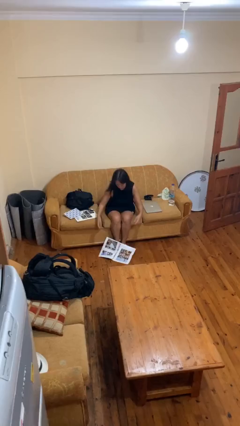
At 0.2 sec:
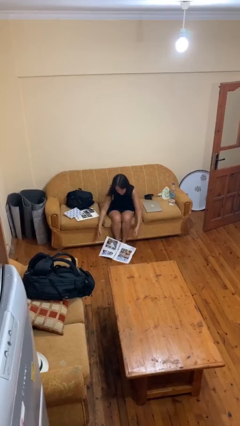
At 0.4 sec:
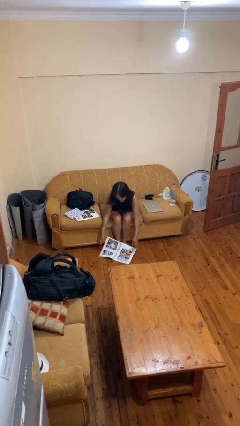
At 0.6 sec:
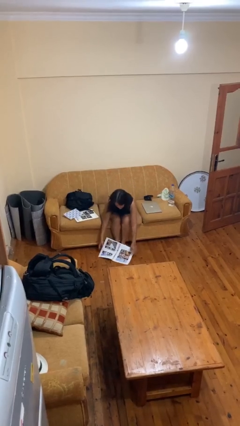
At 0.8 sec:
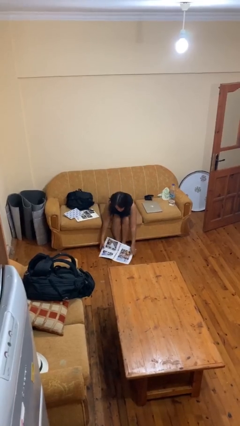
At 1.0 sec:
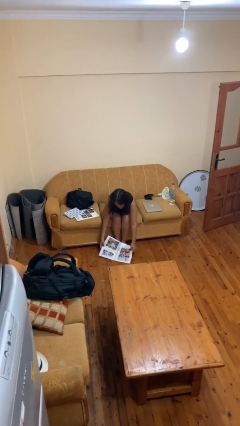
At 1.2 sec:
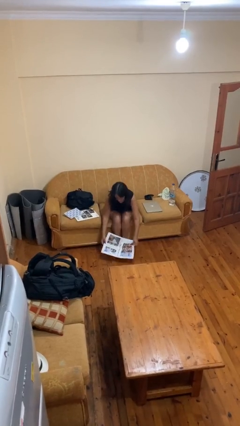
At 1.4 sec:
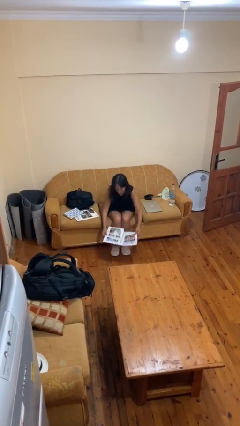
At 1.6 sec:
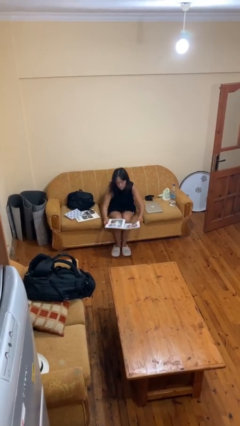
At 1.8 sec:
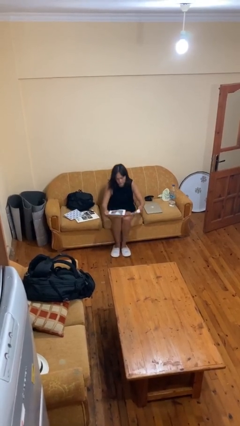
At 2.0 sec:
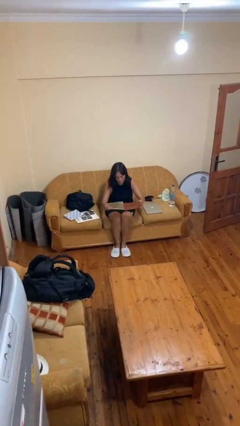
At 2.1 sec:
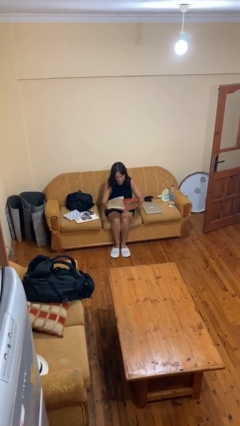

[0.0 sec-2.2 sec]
person picks up object from floor

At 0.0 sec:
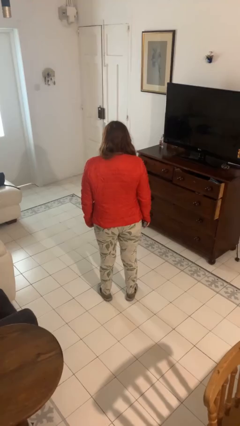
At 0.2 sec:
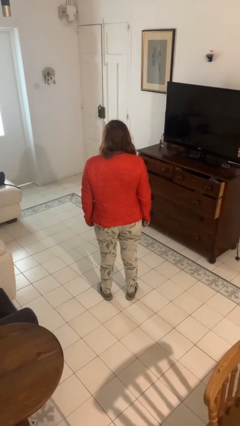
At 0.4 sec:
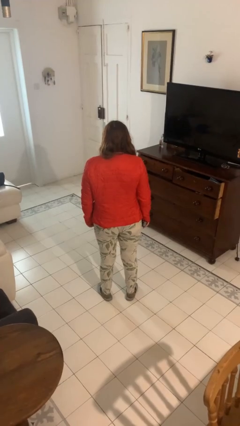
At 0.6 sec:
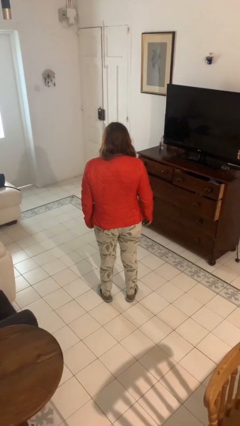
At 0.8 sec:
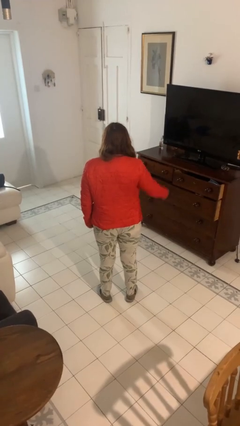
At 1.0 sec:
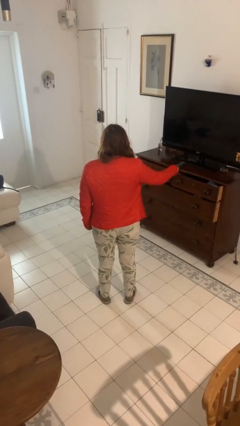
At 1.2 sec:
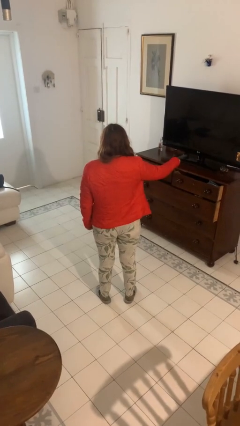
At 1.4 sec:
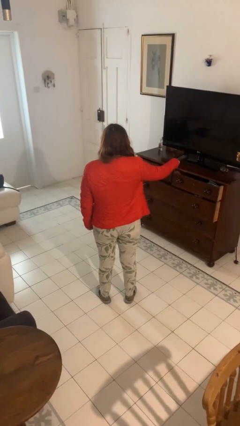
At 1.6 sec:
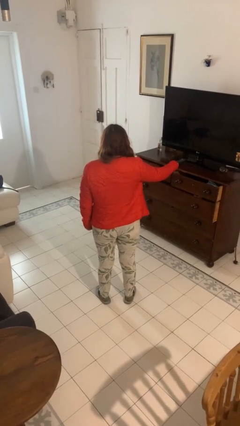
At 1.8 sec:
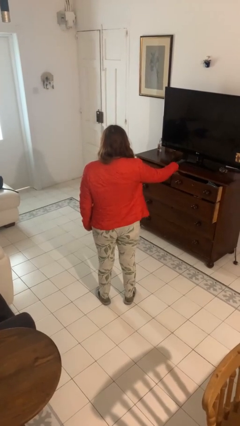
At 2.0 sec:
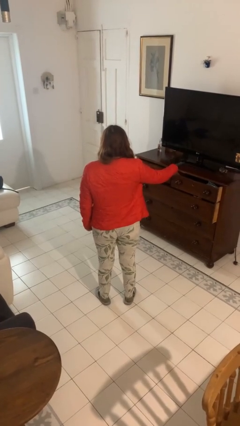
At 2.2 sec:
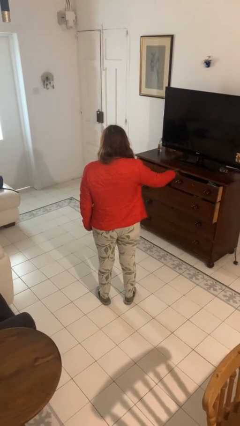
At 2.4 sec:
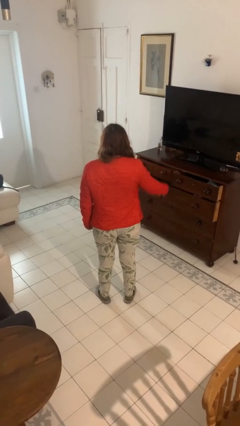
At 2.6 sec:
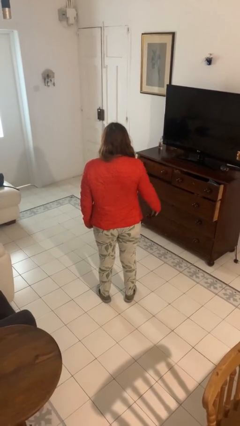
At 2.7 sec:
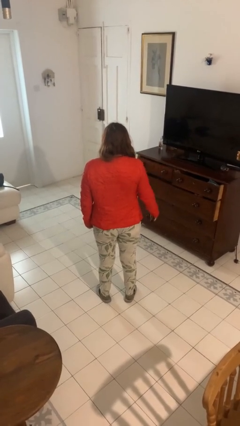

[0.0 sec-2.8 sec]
person uses television remote

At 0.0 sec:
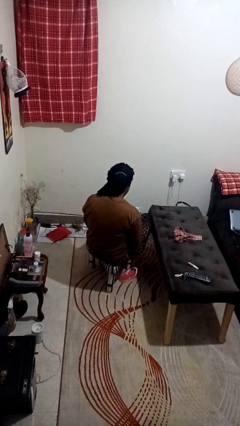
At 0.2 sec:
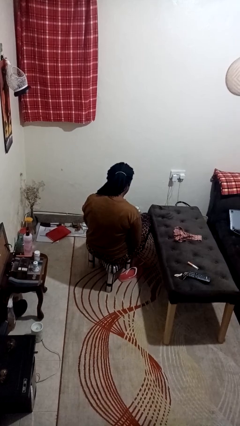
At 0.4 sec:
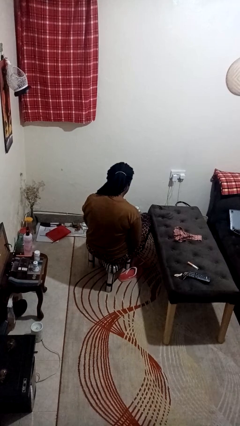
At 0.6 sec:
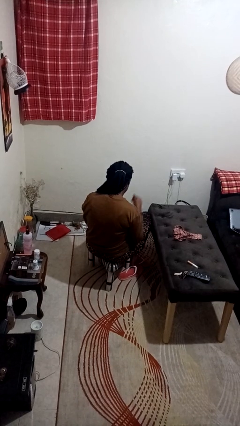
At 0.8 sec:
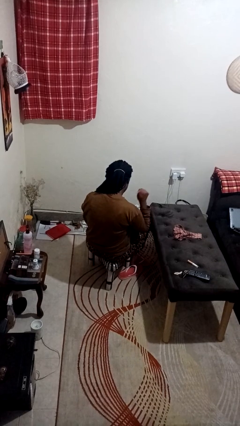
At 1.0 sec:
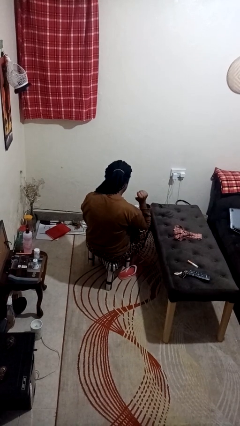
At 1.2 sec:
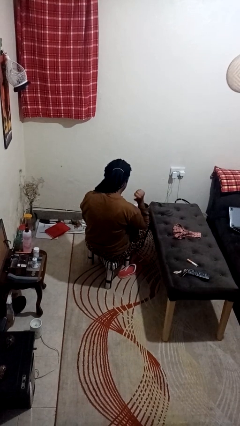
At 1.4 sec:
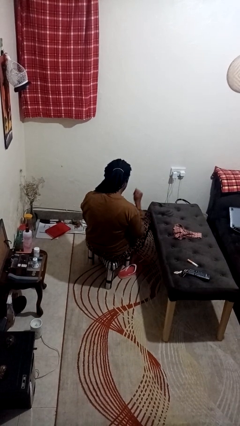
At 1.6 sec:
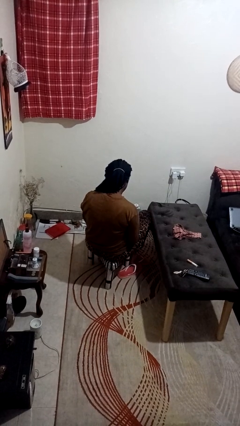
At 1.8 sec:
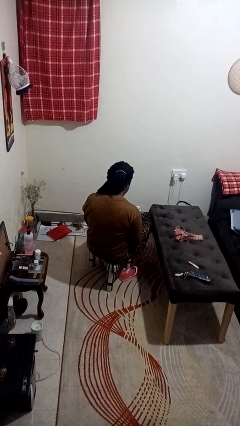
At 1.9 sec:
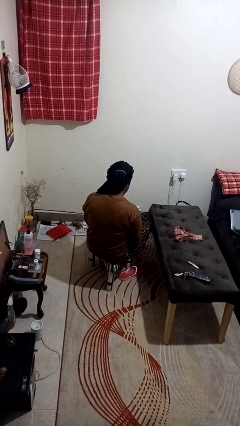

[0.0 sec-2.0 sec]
person gestures behind me

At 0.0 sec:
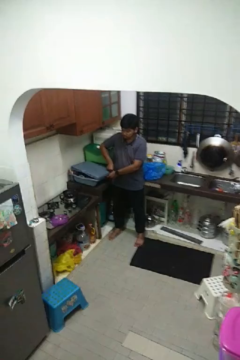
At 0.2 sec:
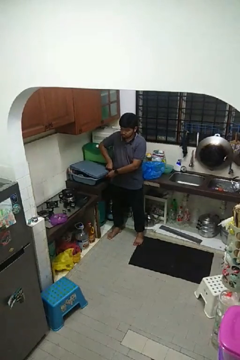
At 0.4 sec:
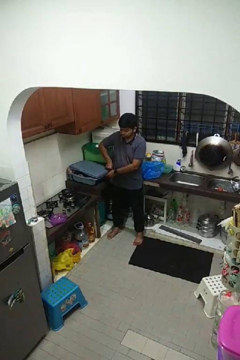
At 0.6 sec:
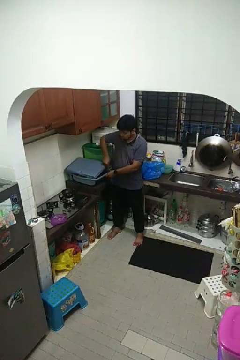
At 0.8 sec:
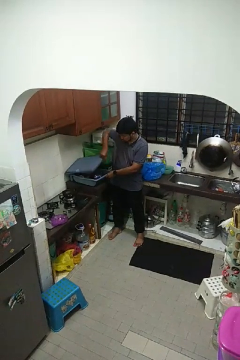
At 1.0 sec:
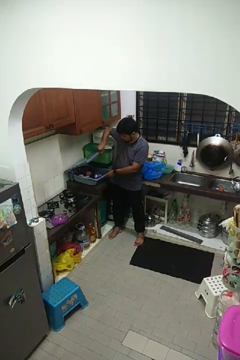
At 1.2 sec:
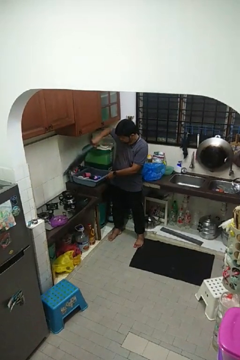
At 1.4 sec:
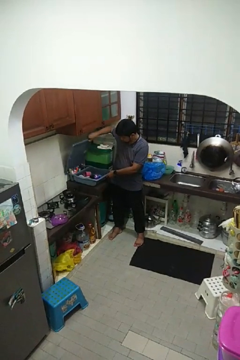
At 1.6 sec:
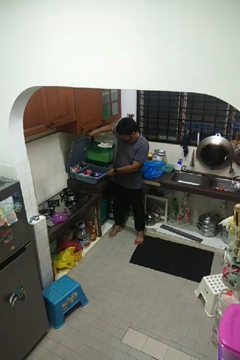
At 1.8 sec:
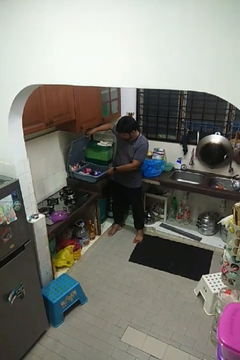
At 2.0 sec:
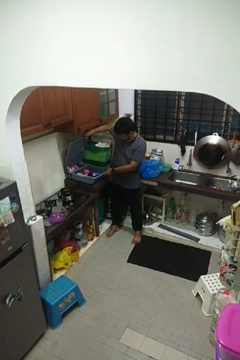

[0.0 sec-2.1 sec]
person opens dishwasher

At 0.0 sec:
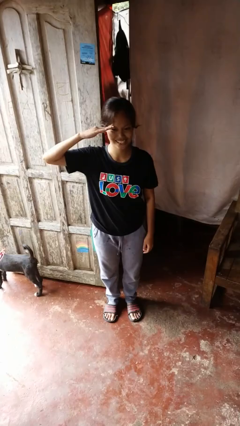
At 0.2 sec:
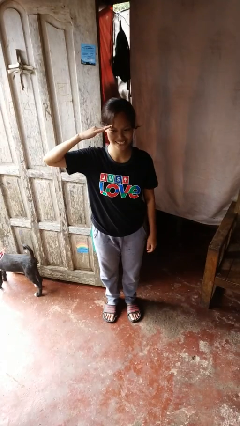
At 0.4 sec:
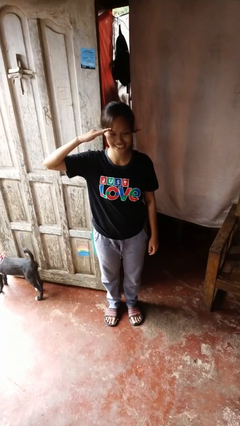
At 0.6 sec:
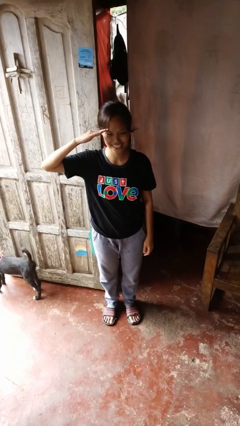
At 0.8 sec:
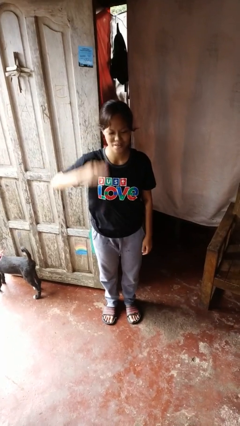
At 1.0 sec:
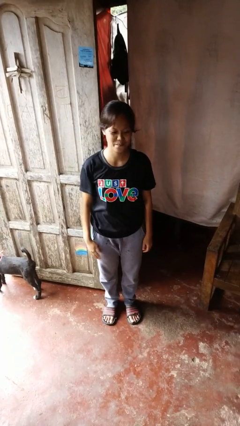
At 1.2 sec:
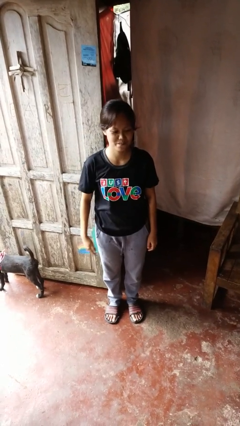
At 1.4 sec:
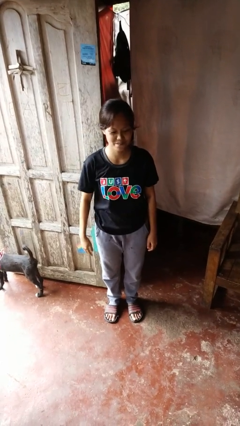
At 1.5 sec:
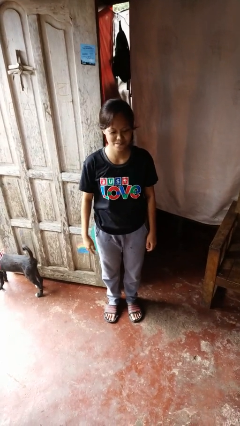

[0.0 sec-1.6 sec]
person salutes

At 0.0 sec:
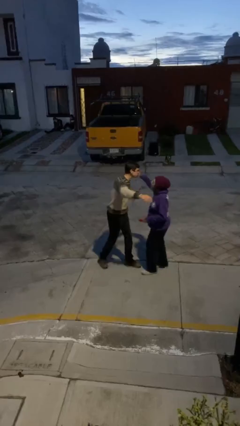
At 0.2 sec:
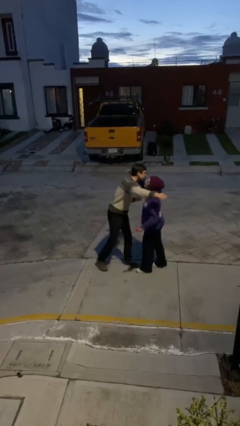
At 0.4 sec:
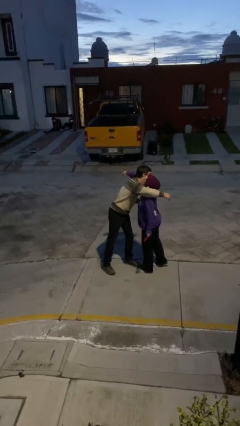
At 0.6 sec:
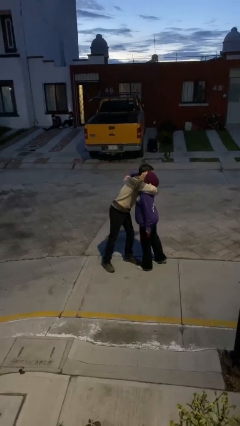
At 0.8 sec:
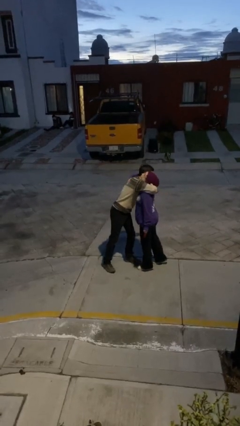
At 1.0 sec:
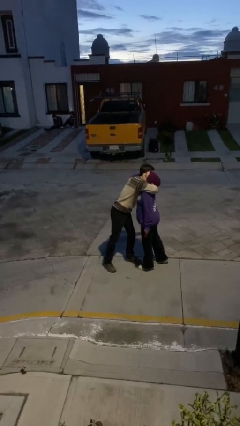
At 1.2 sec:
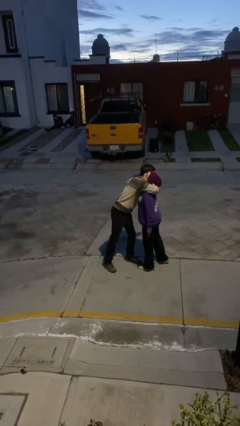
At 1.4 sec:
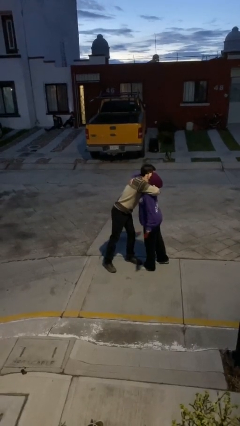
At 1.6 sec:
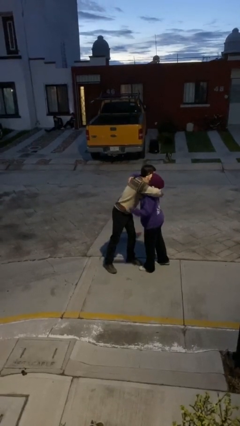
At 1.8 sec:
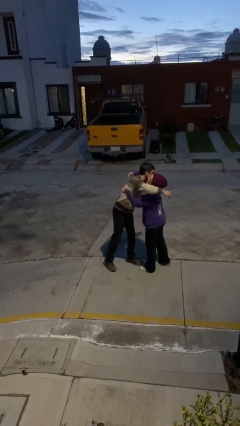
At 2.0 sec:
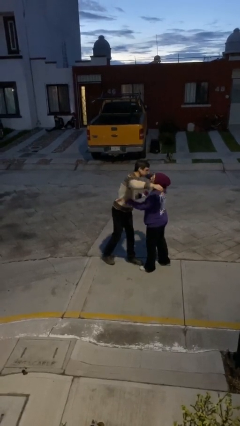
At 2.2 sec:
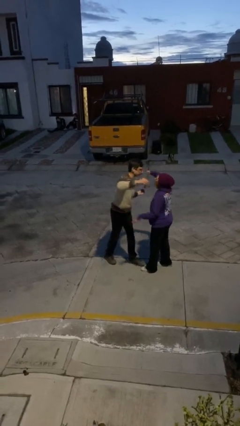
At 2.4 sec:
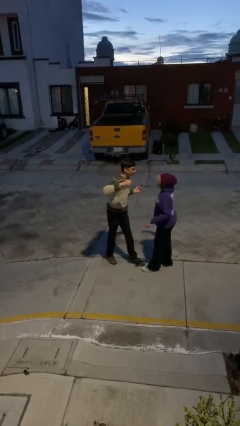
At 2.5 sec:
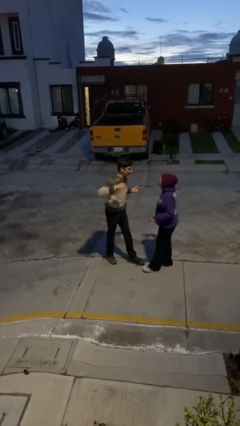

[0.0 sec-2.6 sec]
person embraces person

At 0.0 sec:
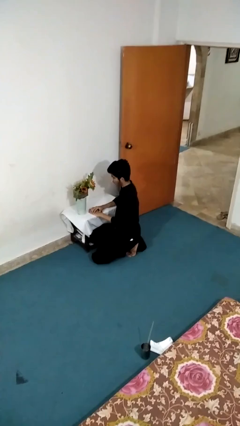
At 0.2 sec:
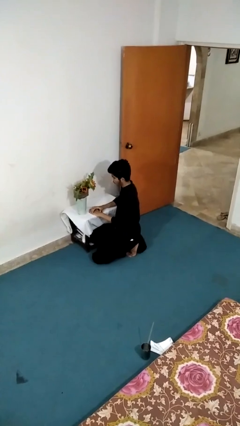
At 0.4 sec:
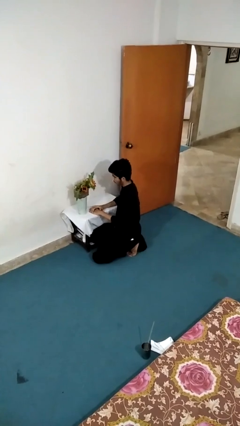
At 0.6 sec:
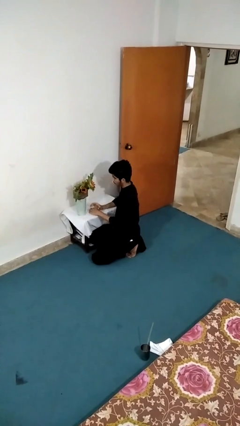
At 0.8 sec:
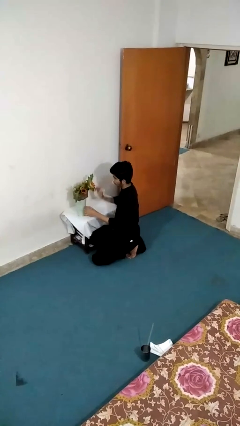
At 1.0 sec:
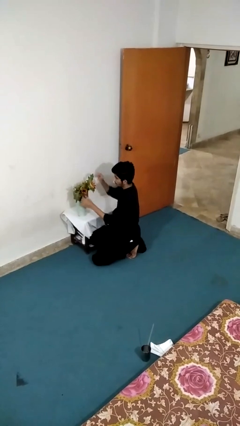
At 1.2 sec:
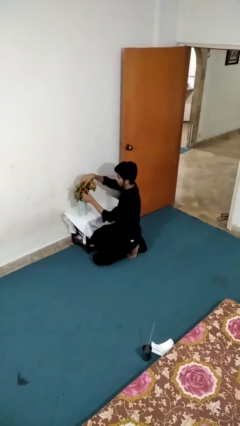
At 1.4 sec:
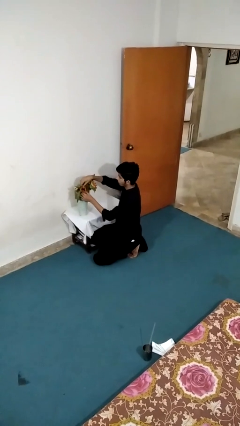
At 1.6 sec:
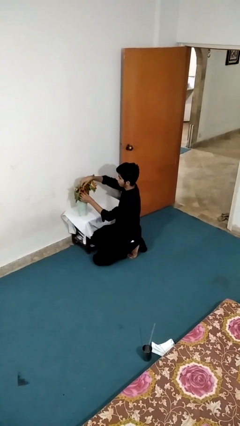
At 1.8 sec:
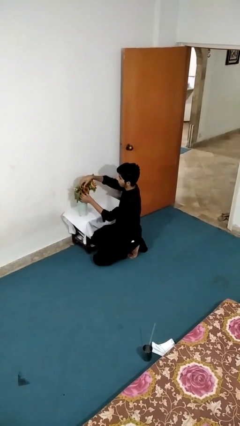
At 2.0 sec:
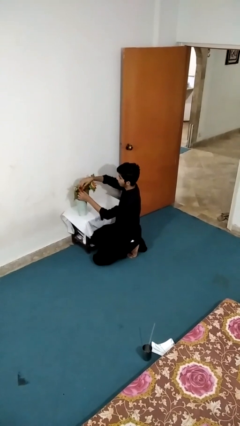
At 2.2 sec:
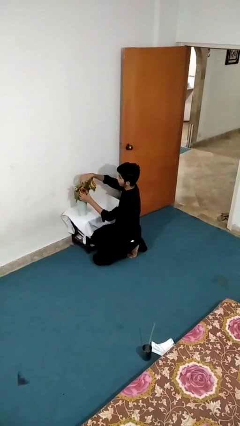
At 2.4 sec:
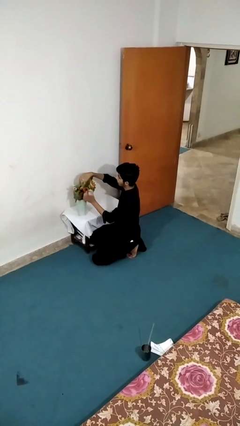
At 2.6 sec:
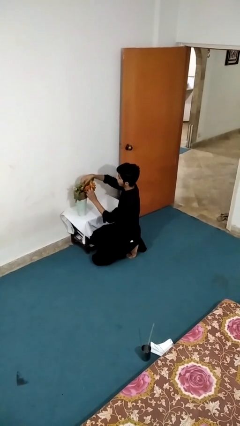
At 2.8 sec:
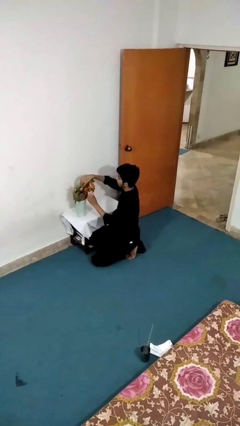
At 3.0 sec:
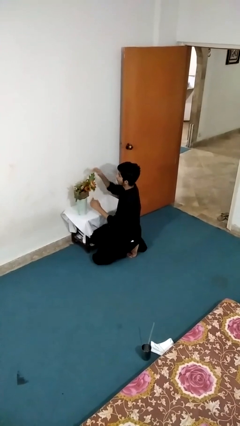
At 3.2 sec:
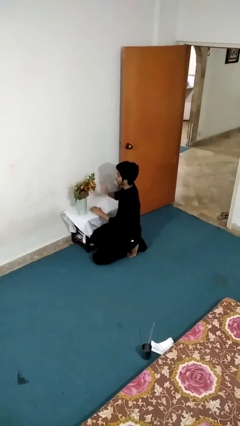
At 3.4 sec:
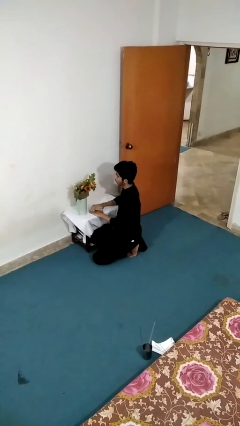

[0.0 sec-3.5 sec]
person arranges flowers in vase

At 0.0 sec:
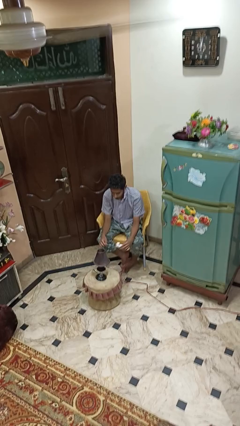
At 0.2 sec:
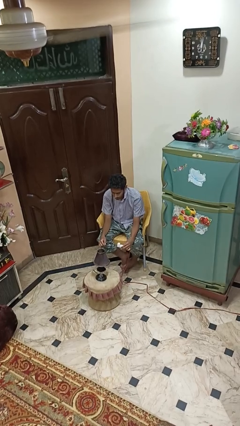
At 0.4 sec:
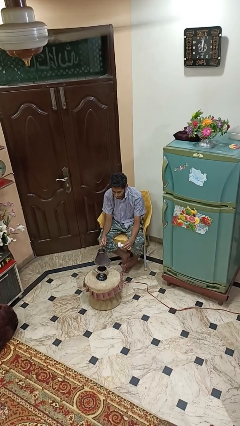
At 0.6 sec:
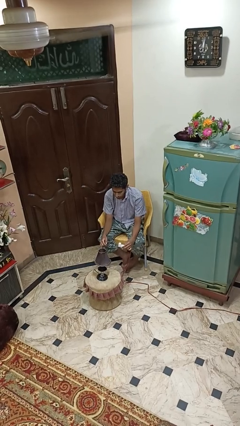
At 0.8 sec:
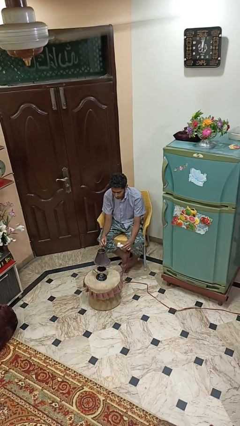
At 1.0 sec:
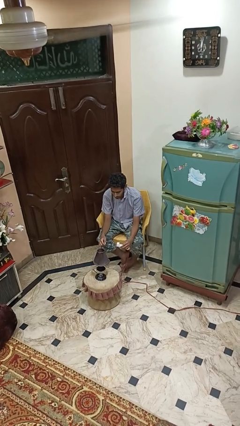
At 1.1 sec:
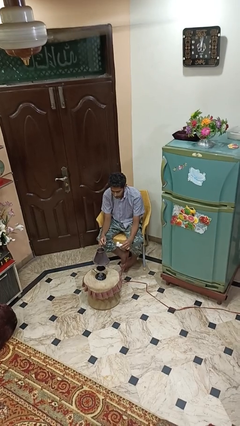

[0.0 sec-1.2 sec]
person turns off lamp
